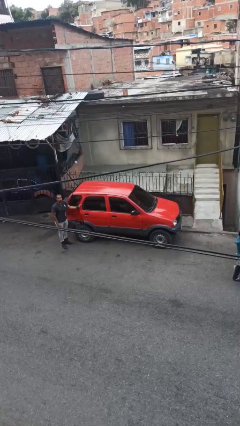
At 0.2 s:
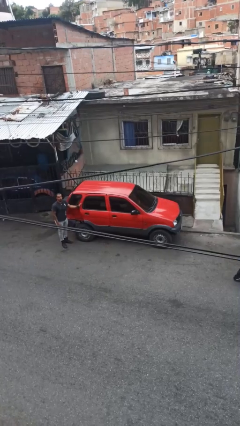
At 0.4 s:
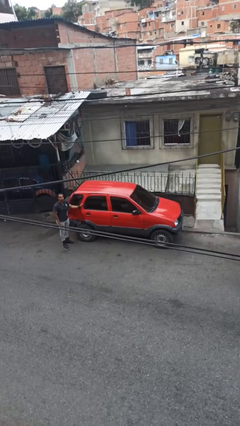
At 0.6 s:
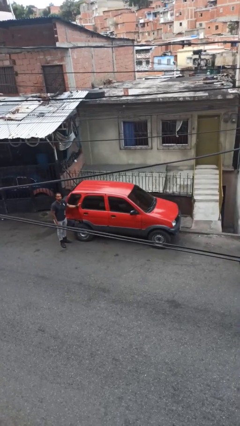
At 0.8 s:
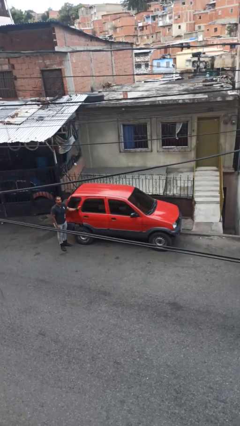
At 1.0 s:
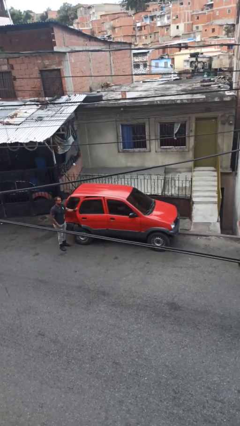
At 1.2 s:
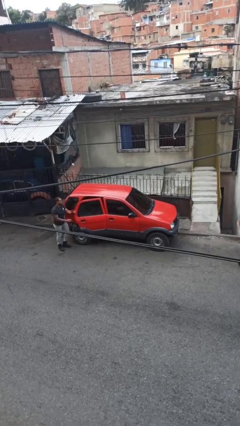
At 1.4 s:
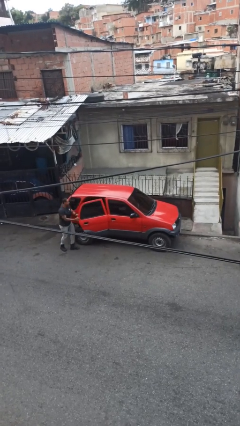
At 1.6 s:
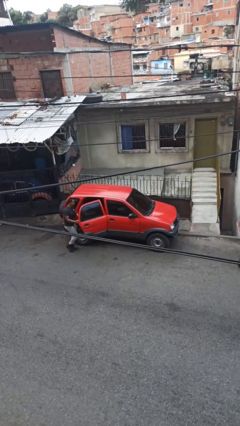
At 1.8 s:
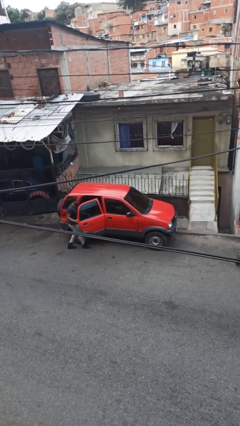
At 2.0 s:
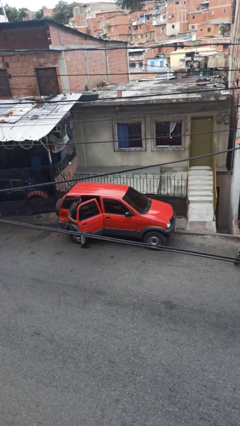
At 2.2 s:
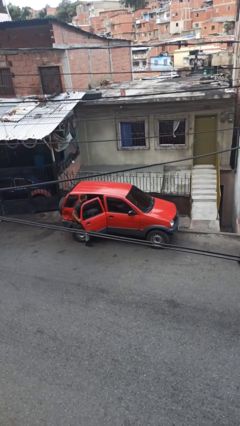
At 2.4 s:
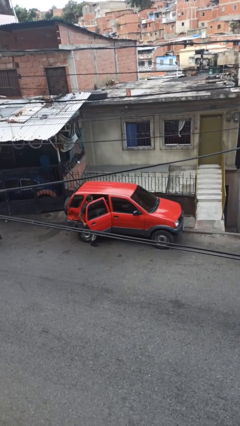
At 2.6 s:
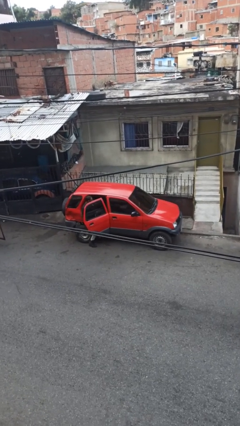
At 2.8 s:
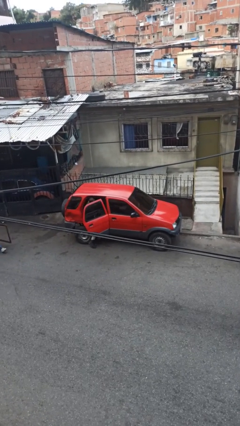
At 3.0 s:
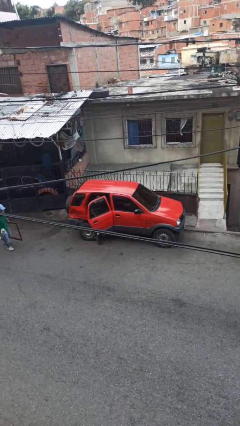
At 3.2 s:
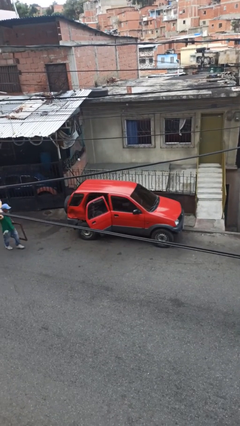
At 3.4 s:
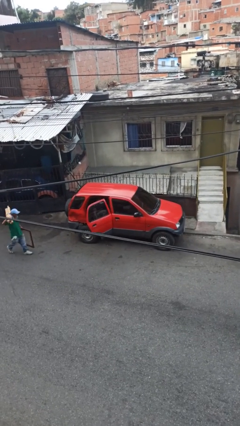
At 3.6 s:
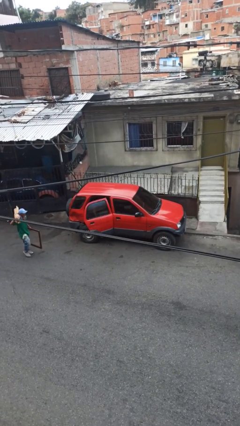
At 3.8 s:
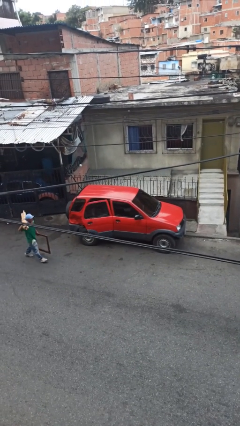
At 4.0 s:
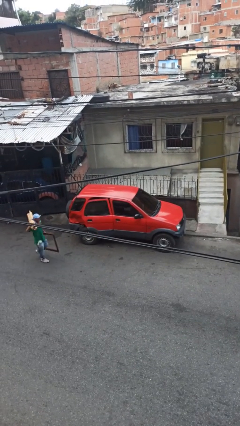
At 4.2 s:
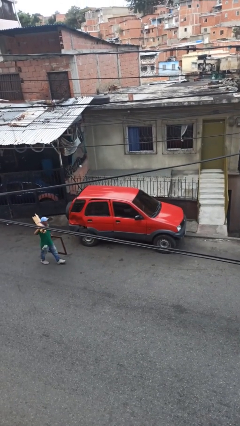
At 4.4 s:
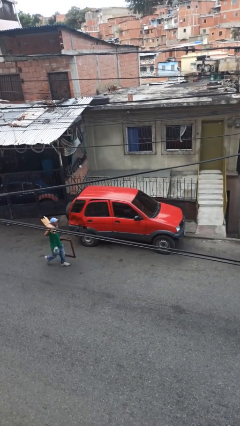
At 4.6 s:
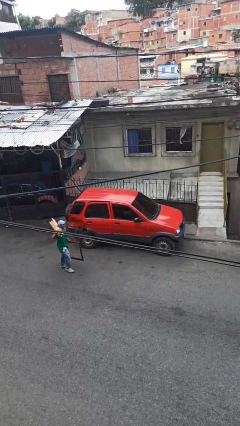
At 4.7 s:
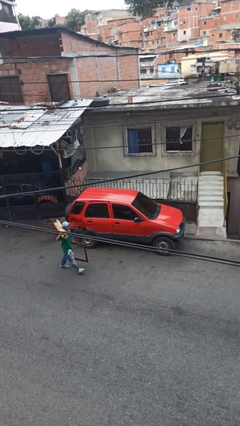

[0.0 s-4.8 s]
car picks up person

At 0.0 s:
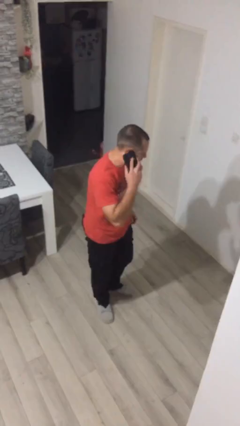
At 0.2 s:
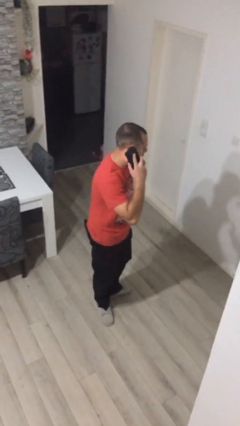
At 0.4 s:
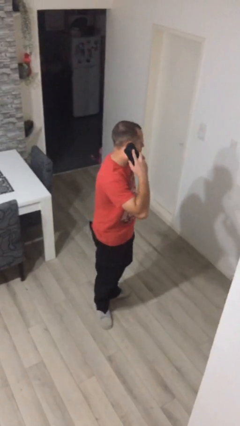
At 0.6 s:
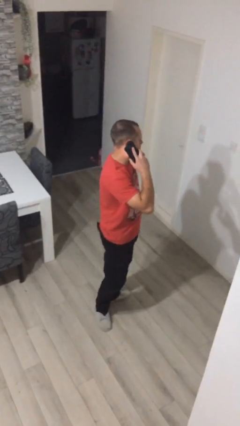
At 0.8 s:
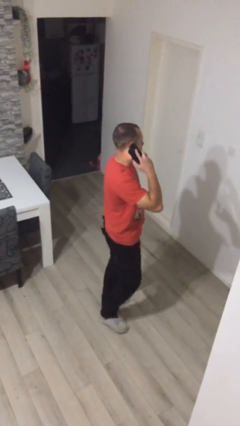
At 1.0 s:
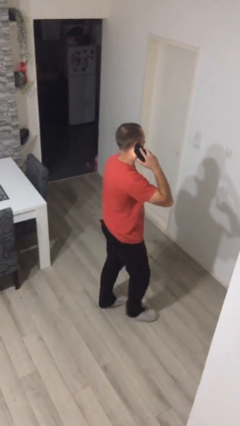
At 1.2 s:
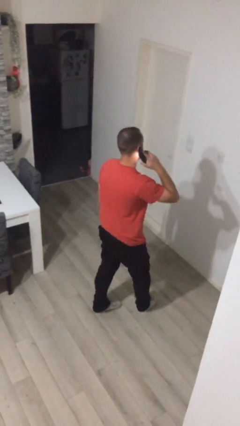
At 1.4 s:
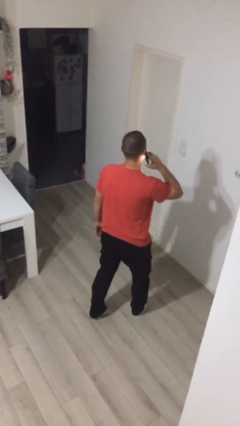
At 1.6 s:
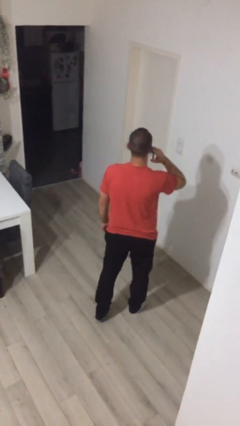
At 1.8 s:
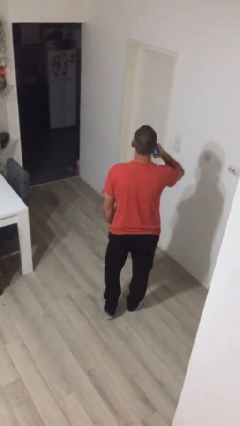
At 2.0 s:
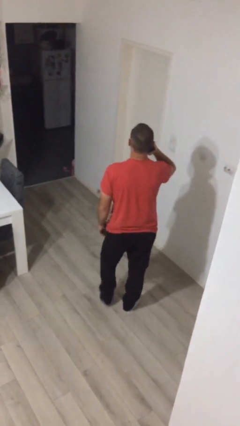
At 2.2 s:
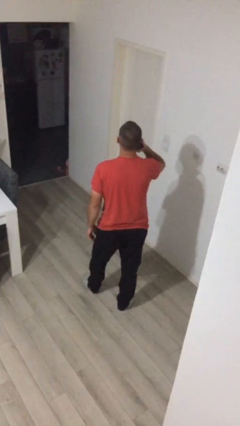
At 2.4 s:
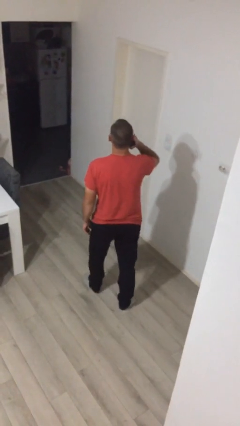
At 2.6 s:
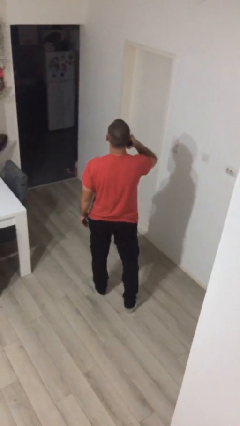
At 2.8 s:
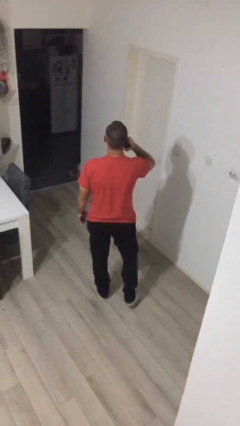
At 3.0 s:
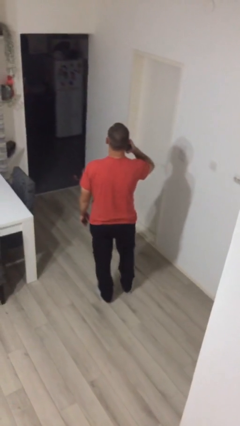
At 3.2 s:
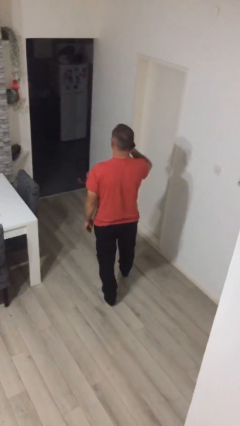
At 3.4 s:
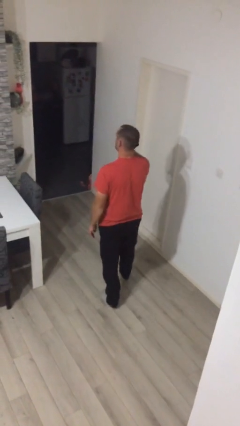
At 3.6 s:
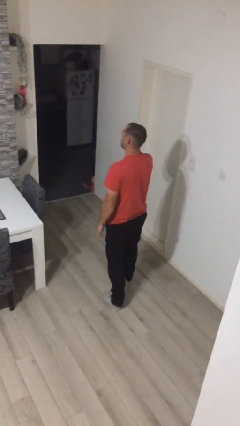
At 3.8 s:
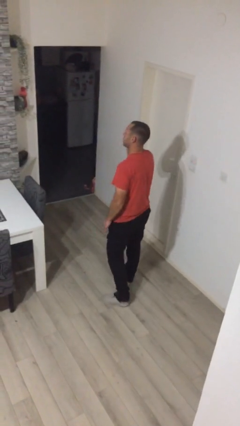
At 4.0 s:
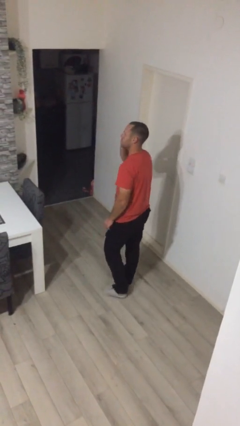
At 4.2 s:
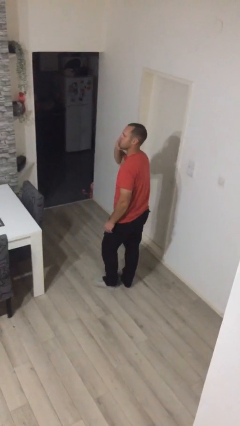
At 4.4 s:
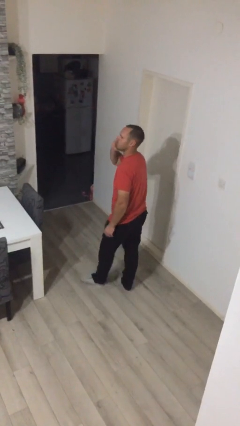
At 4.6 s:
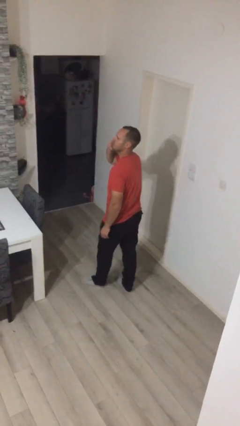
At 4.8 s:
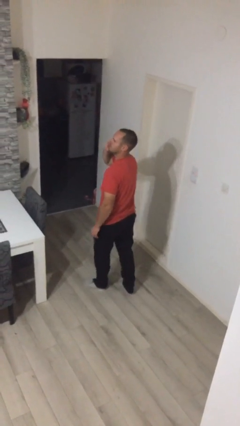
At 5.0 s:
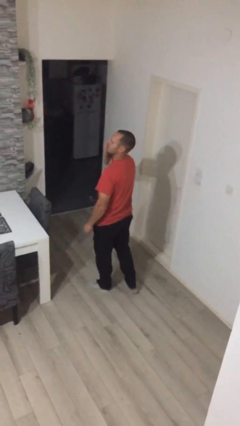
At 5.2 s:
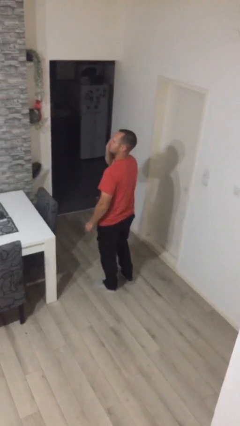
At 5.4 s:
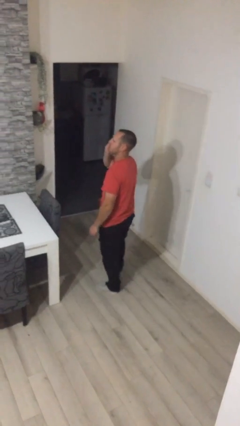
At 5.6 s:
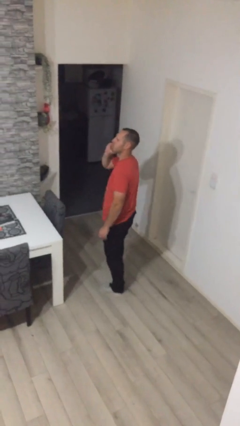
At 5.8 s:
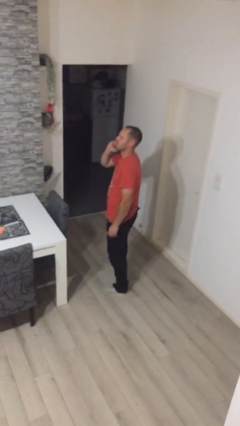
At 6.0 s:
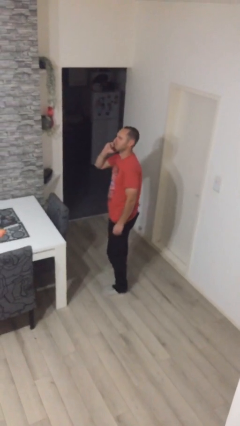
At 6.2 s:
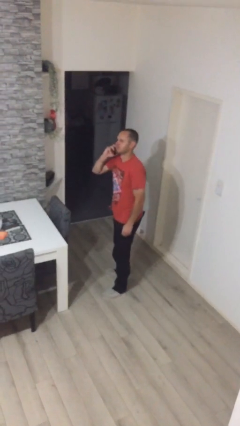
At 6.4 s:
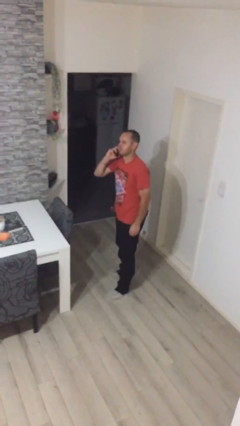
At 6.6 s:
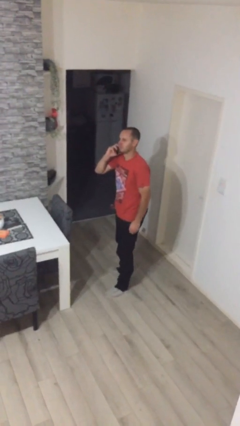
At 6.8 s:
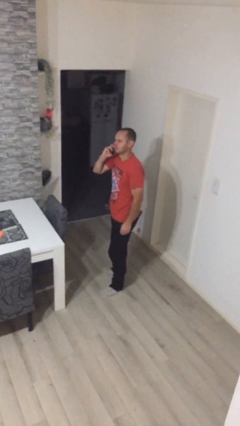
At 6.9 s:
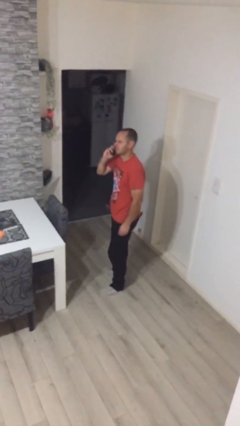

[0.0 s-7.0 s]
person talks on phone

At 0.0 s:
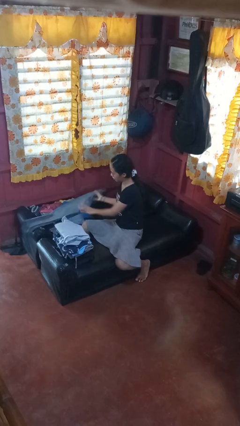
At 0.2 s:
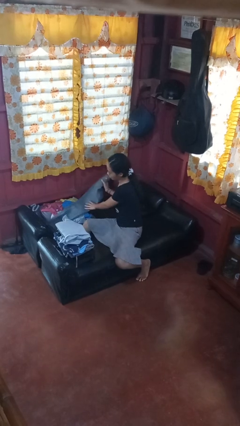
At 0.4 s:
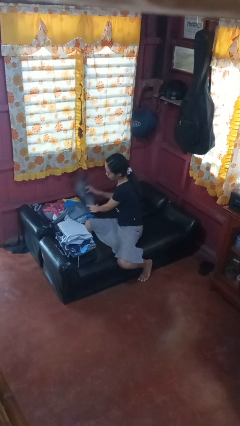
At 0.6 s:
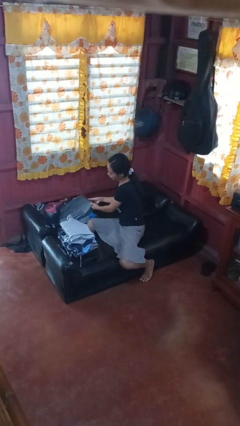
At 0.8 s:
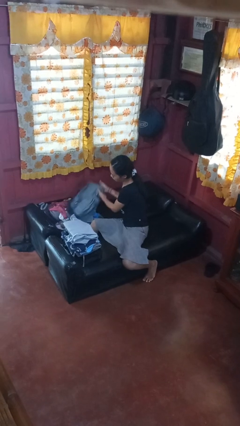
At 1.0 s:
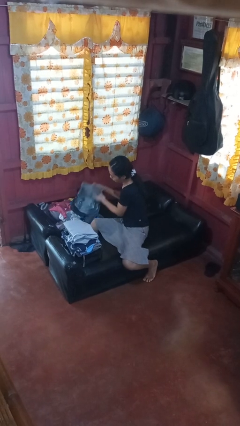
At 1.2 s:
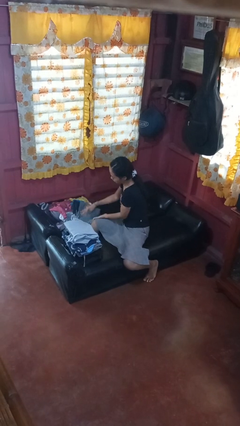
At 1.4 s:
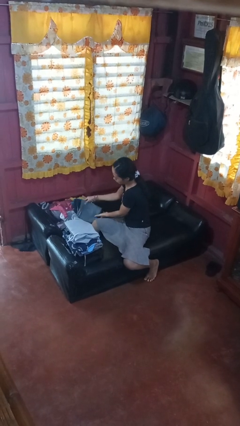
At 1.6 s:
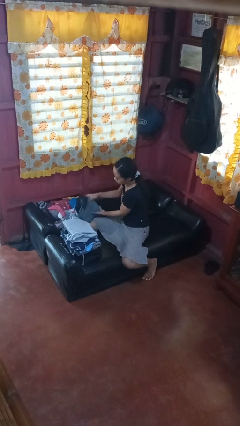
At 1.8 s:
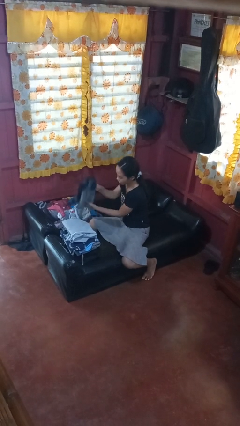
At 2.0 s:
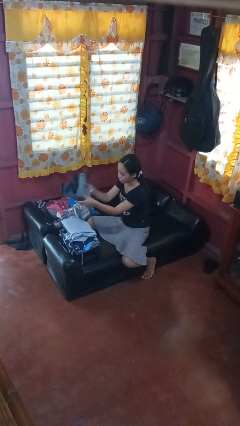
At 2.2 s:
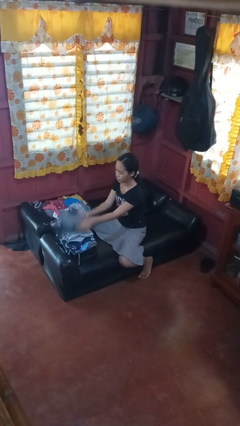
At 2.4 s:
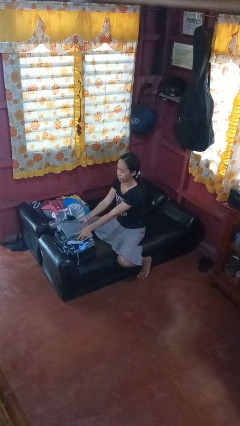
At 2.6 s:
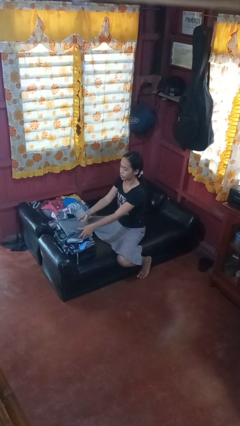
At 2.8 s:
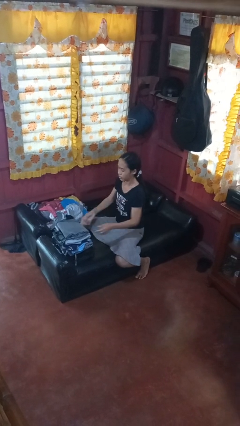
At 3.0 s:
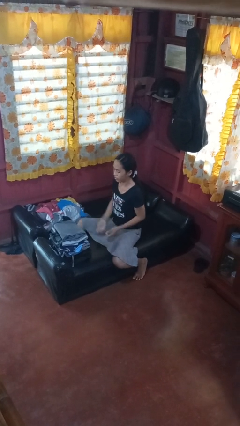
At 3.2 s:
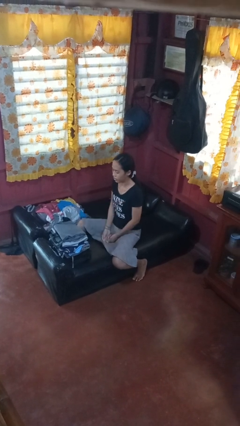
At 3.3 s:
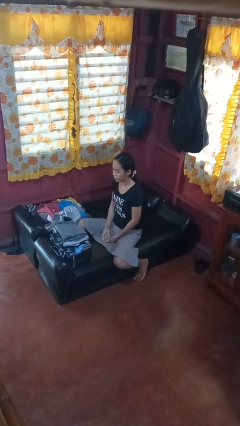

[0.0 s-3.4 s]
person folds pants

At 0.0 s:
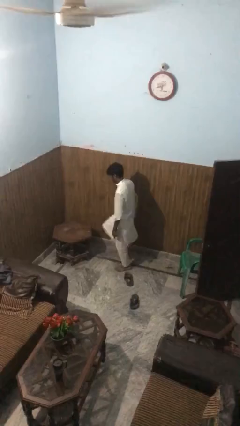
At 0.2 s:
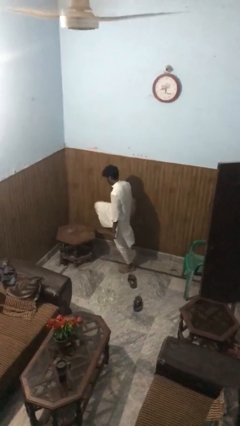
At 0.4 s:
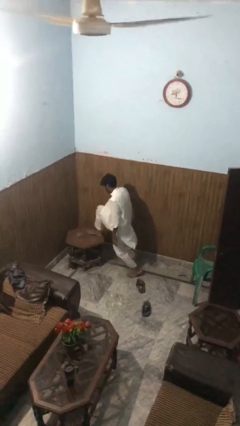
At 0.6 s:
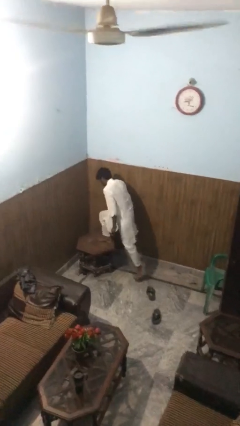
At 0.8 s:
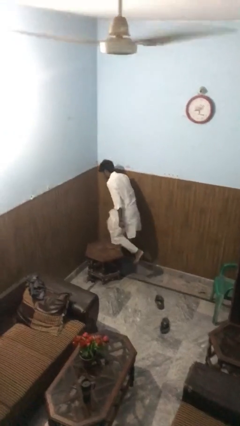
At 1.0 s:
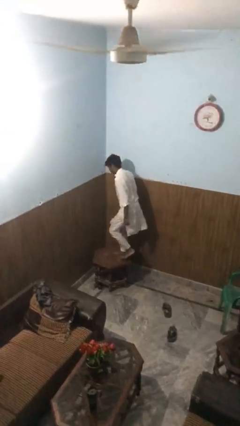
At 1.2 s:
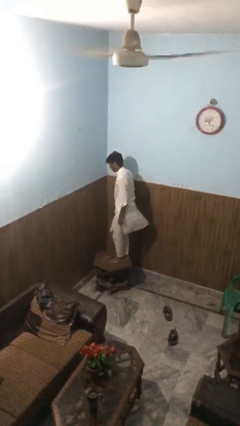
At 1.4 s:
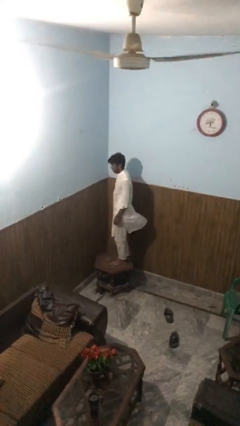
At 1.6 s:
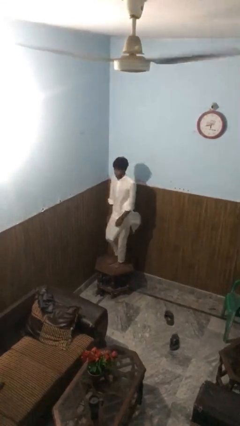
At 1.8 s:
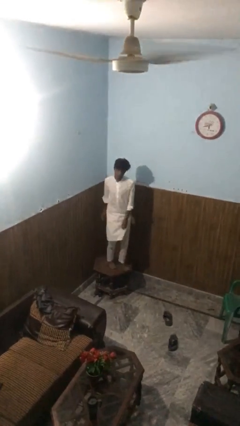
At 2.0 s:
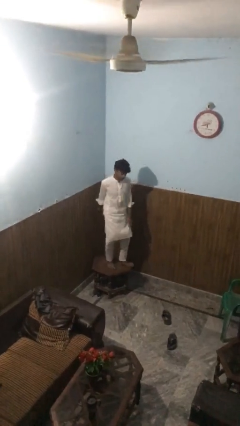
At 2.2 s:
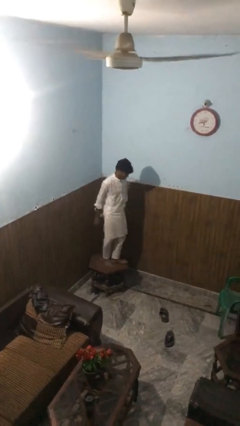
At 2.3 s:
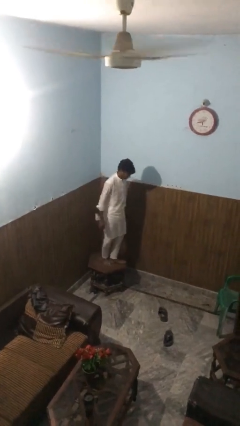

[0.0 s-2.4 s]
person climbs on table
